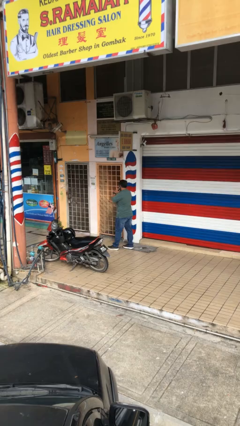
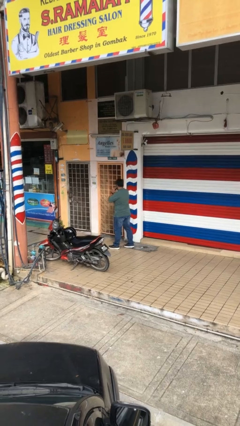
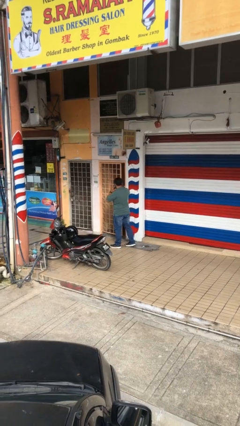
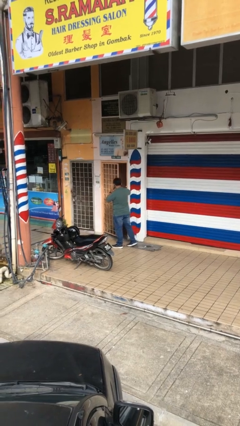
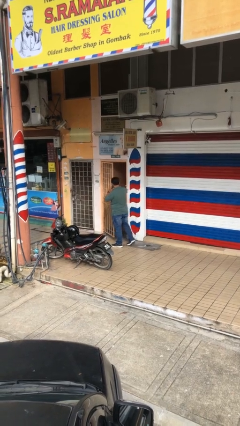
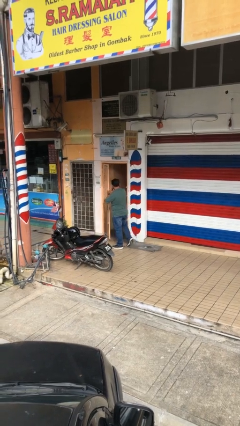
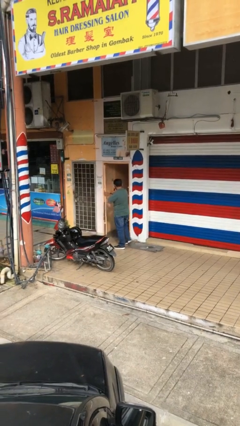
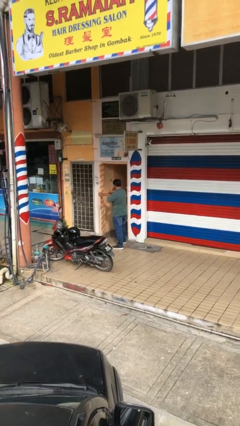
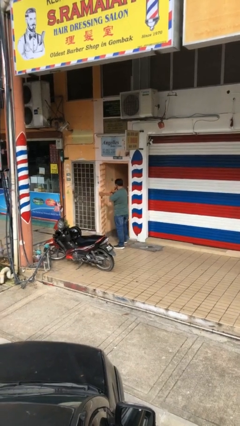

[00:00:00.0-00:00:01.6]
person opens facility door

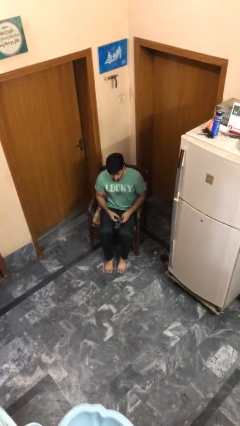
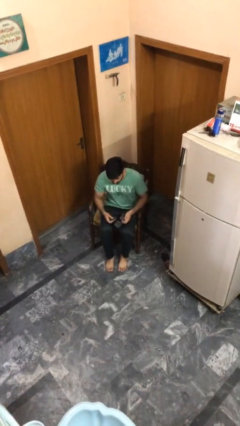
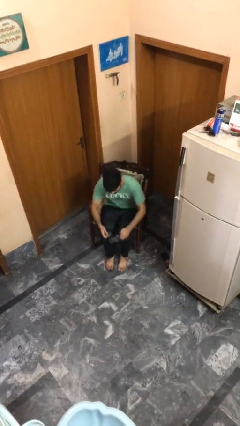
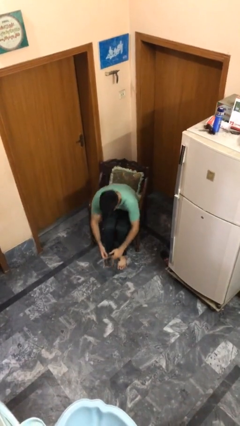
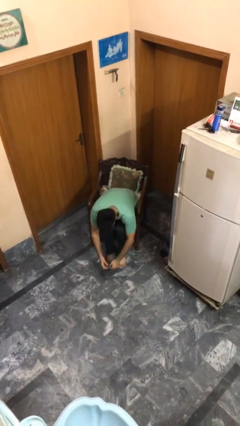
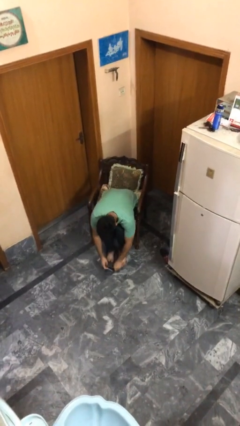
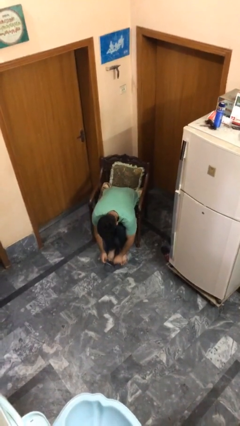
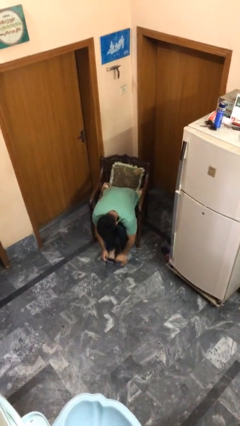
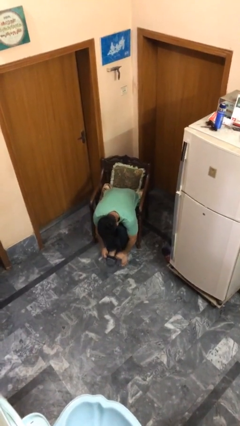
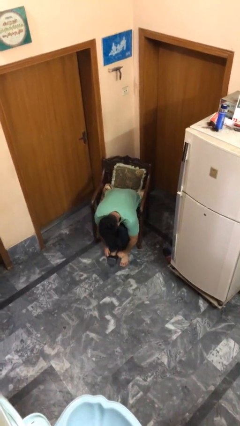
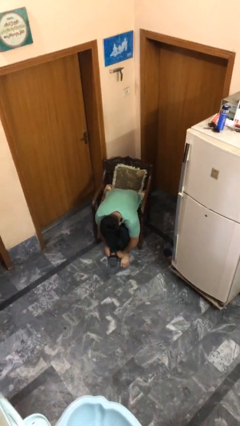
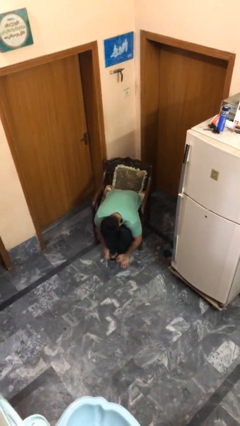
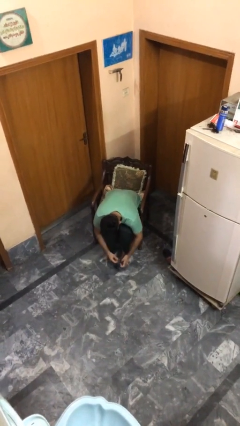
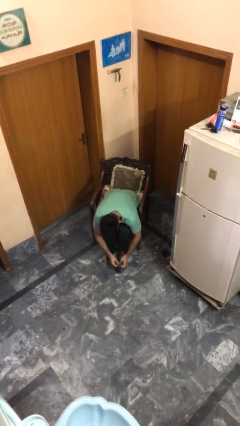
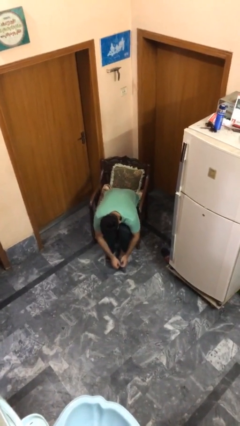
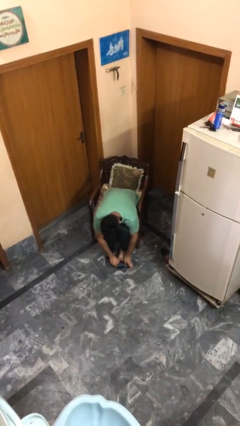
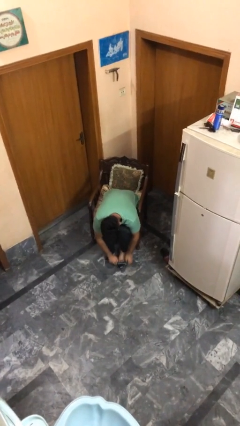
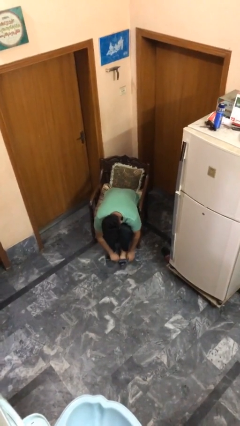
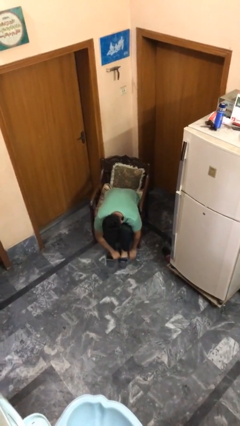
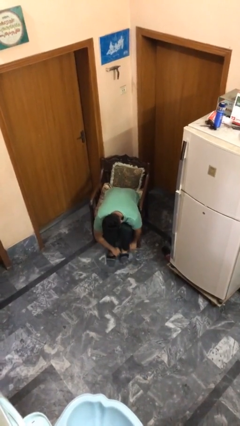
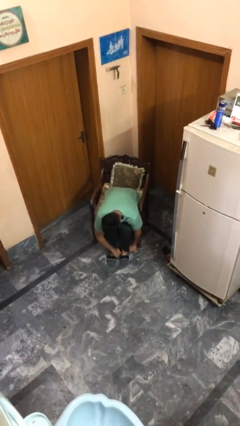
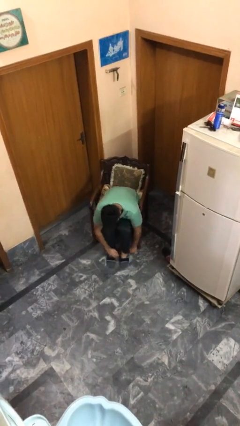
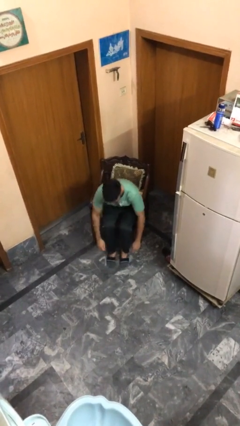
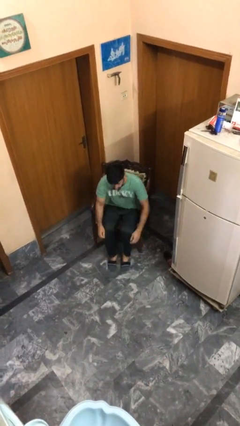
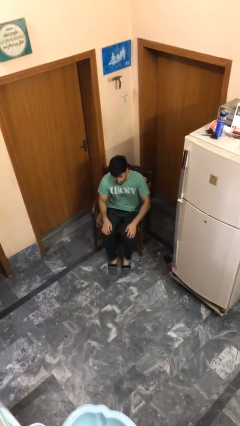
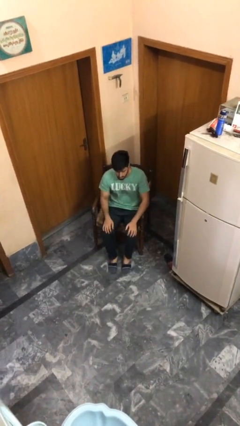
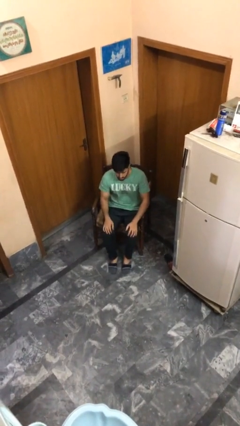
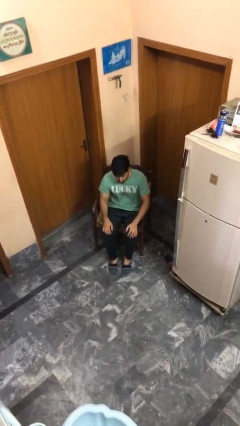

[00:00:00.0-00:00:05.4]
person puts on socks

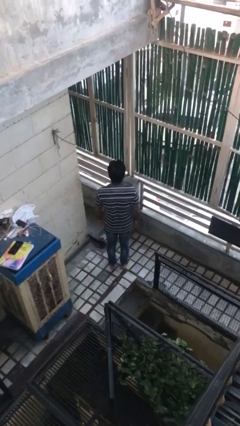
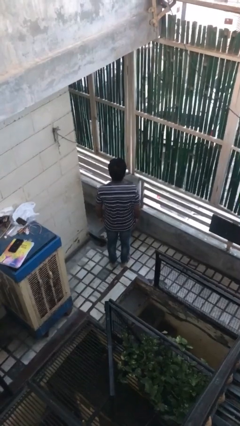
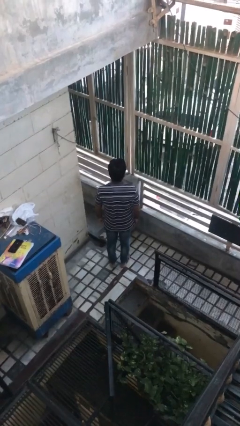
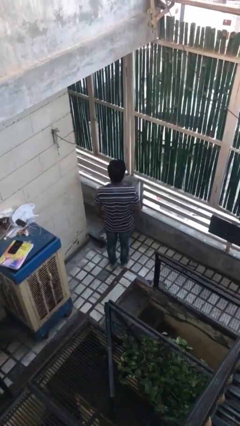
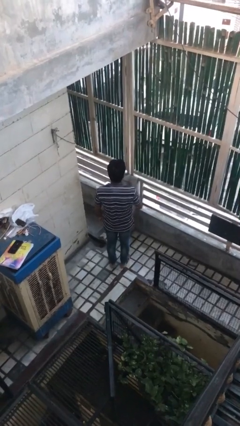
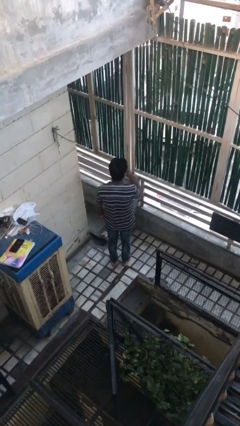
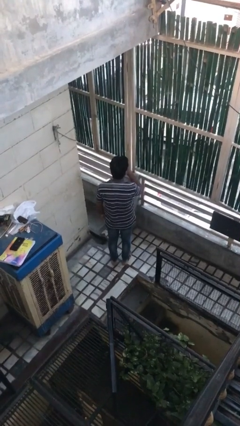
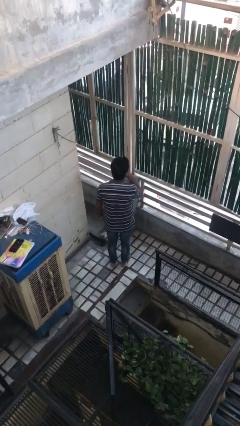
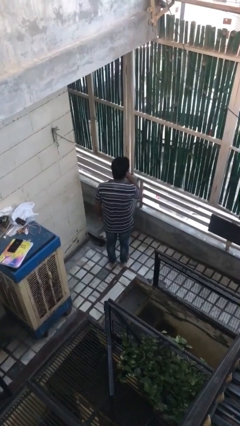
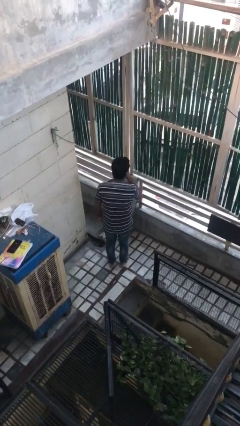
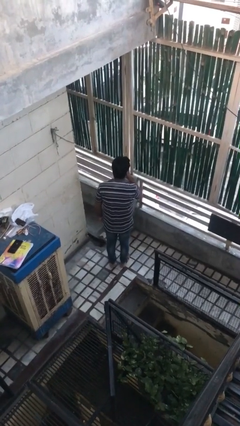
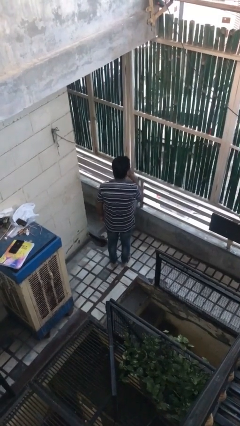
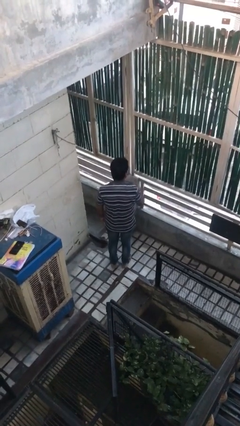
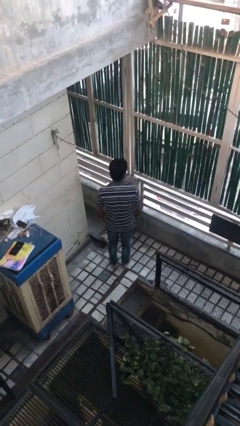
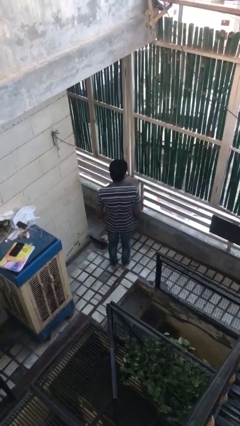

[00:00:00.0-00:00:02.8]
person gestures be quiet

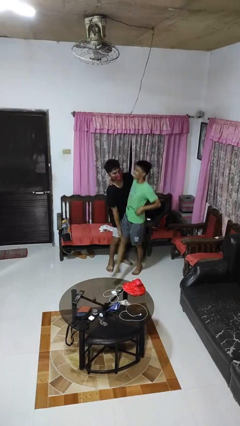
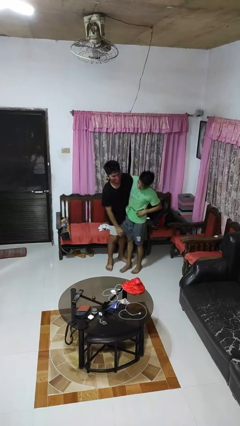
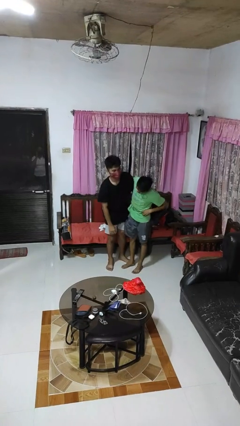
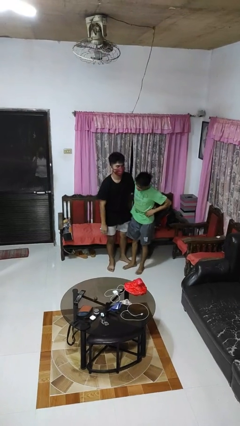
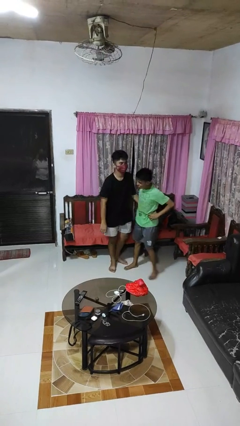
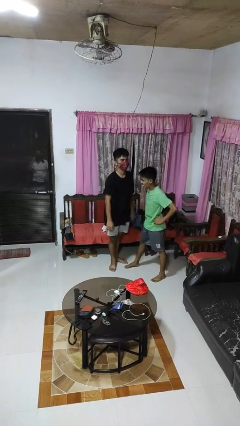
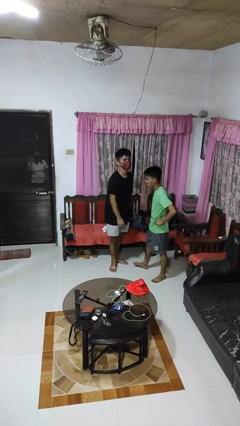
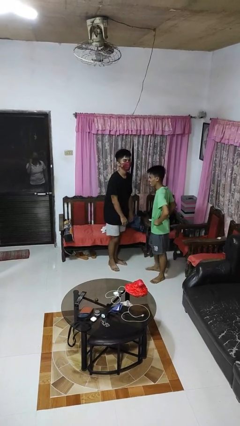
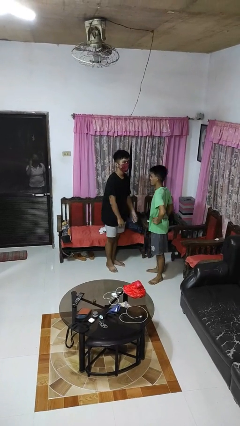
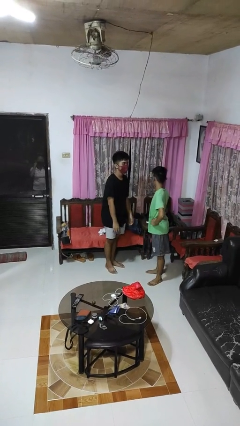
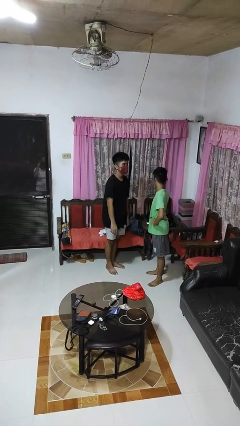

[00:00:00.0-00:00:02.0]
person puts down person

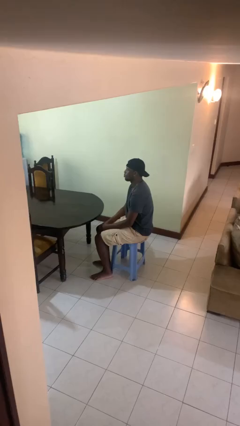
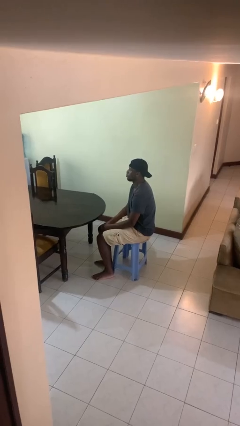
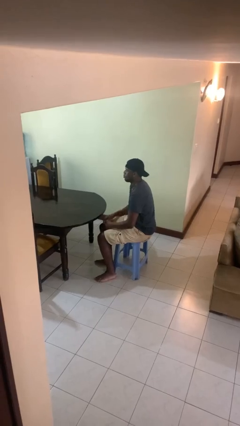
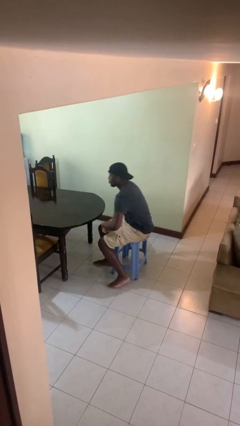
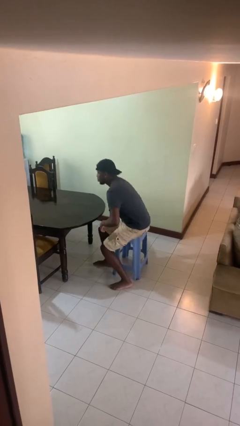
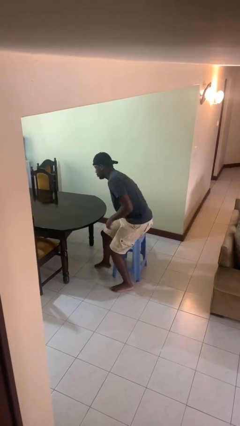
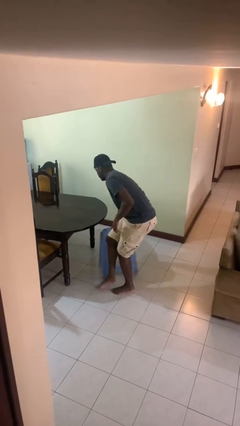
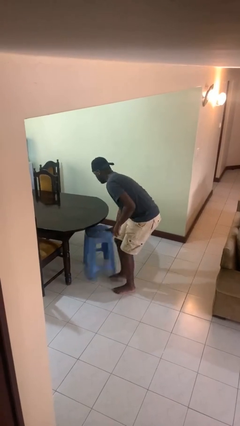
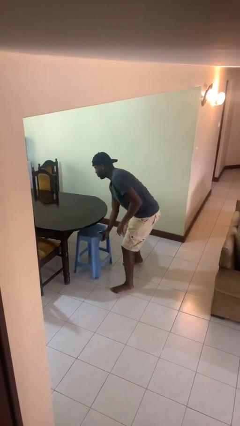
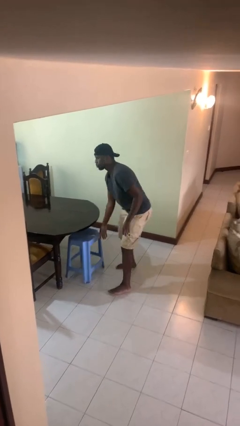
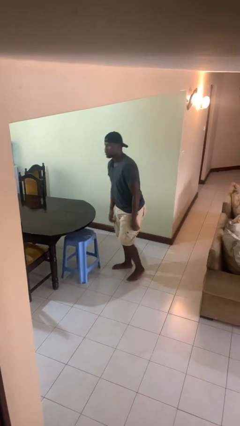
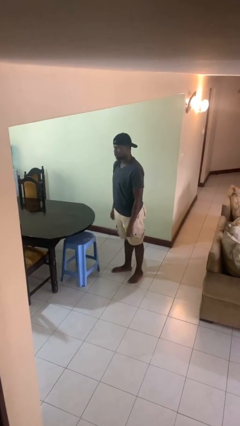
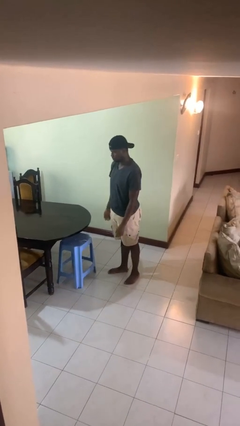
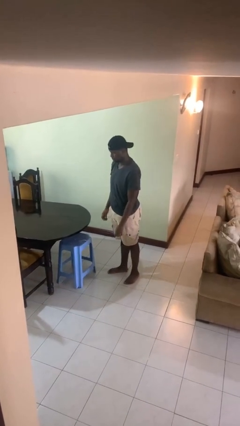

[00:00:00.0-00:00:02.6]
person stands up

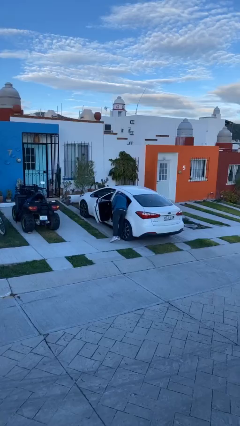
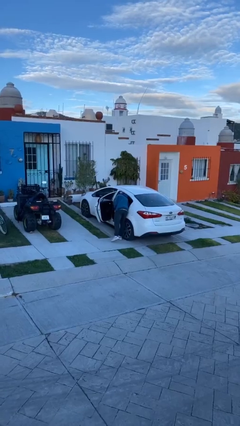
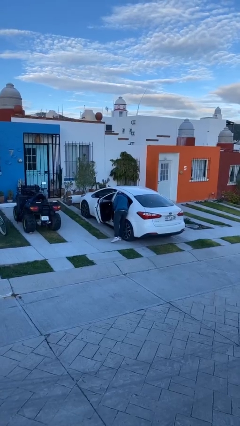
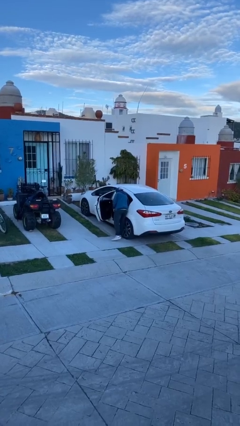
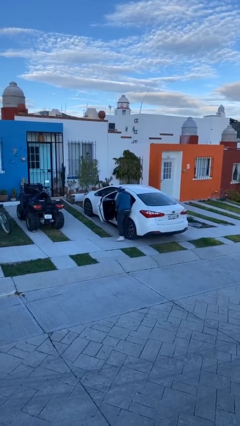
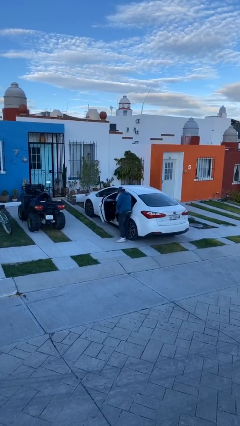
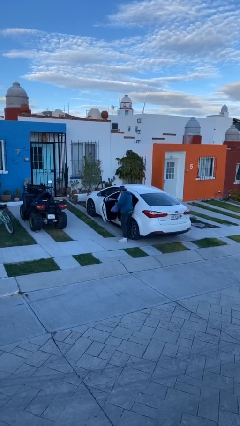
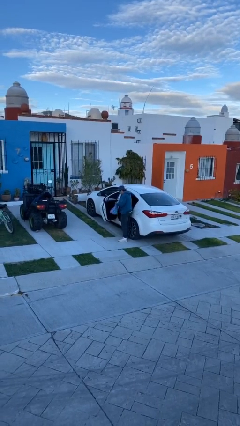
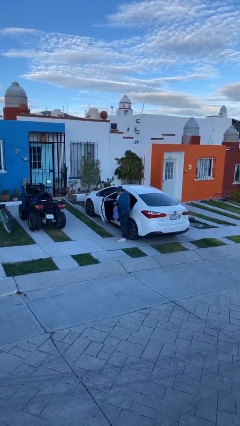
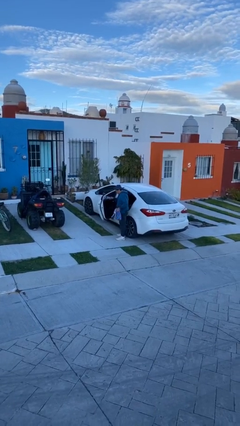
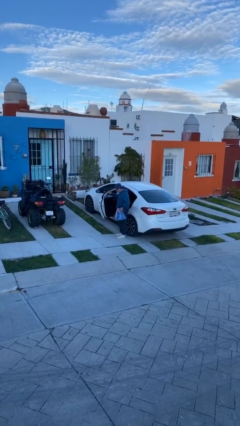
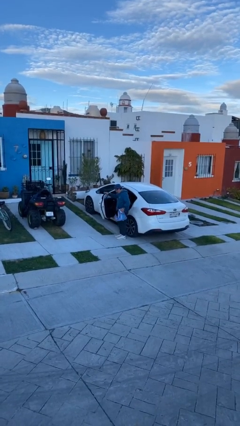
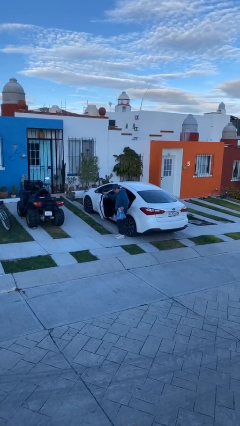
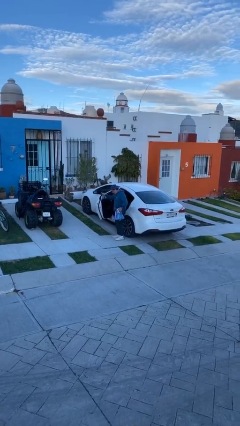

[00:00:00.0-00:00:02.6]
person unloads car
